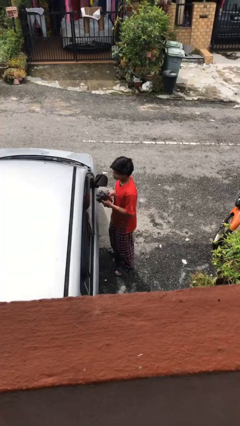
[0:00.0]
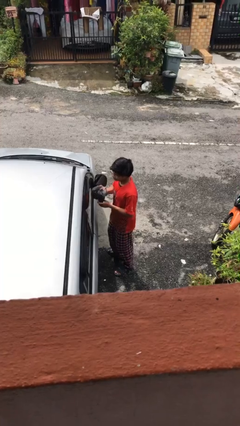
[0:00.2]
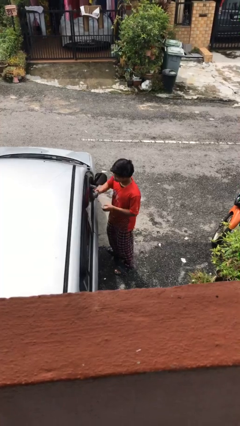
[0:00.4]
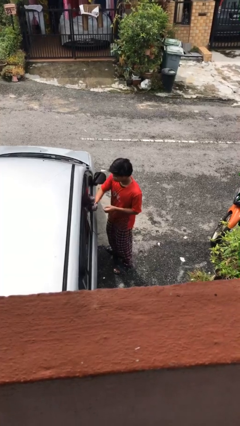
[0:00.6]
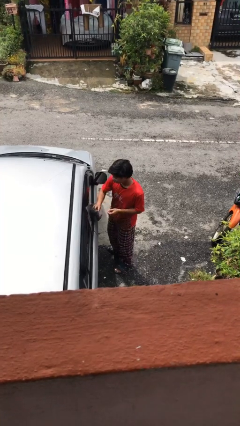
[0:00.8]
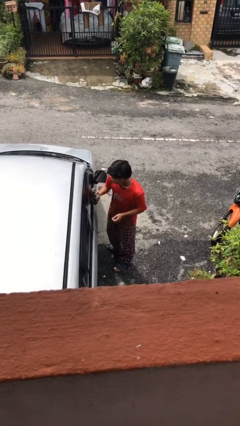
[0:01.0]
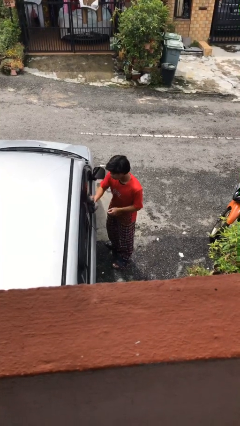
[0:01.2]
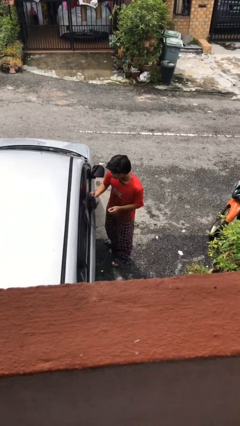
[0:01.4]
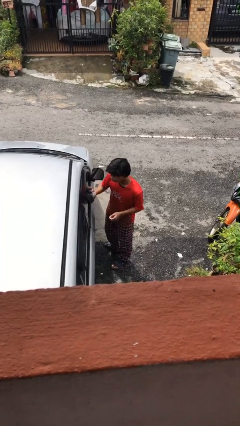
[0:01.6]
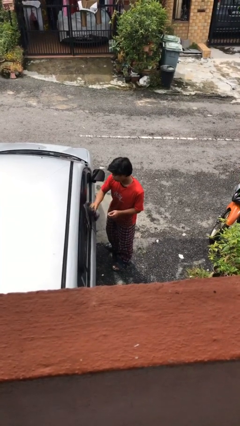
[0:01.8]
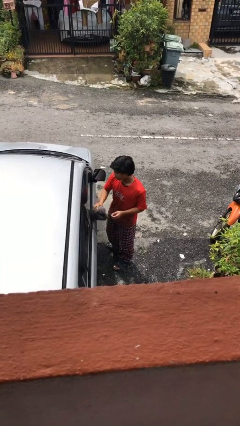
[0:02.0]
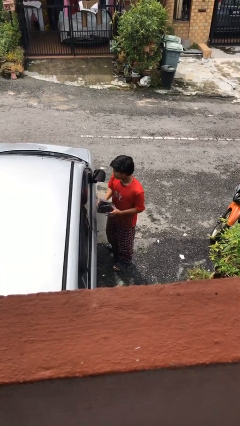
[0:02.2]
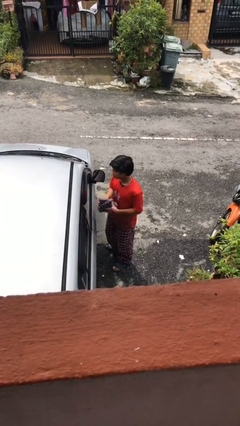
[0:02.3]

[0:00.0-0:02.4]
person polishes car with rag

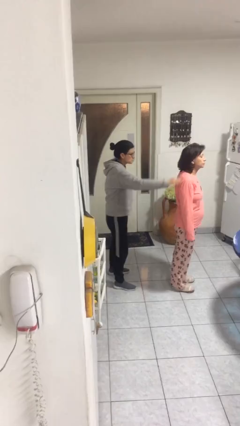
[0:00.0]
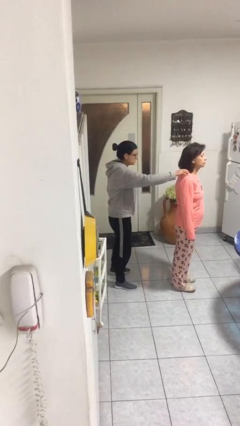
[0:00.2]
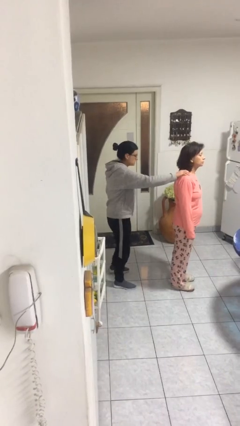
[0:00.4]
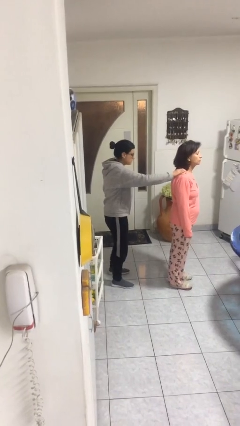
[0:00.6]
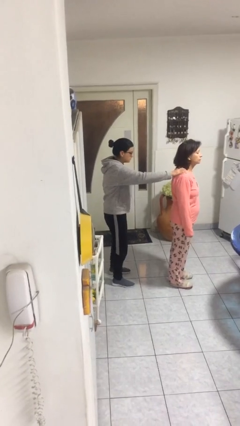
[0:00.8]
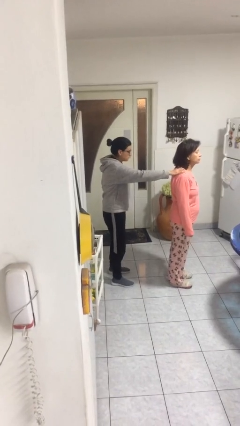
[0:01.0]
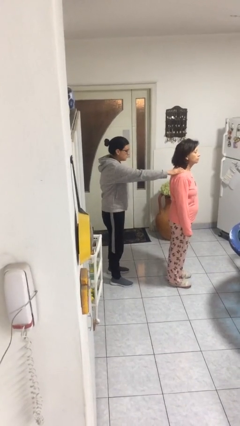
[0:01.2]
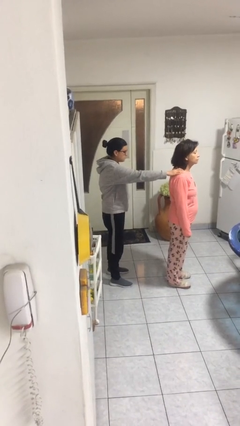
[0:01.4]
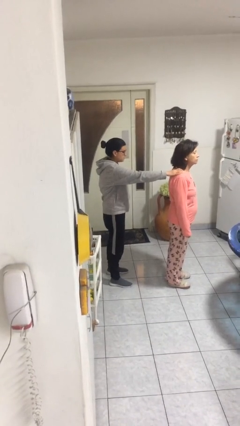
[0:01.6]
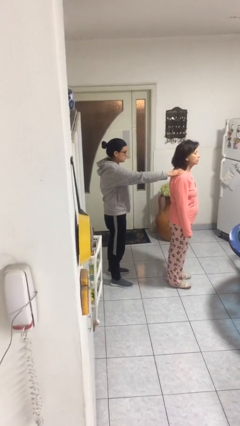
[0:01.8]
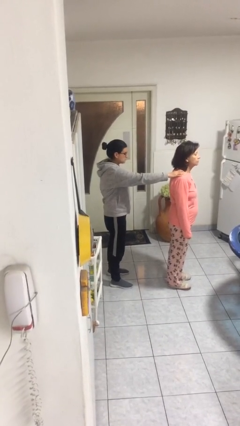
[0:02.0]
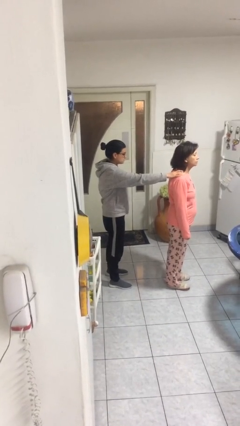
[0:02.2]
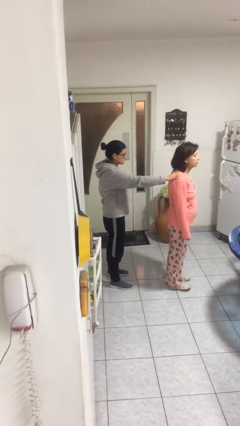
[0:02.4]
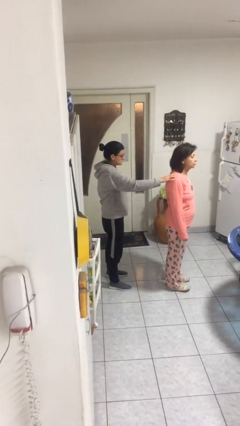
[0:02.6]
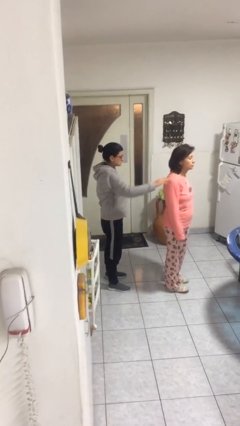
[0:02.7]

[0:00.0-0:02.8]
person grabs person by shoulder

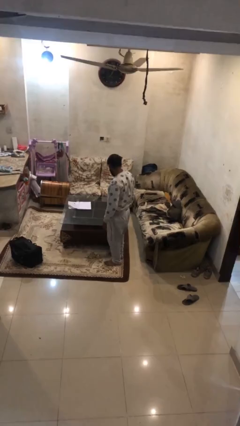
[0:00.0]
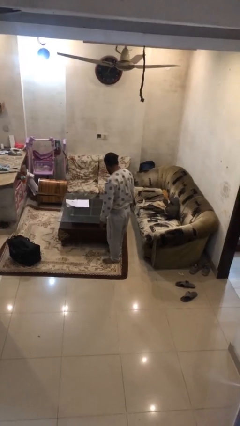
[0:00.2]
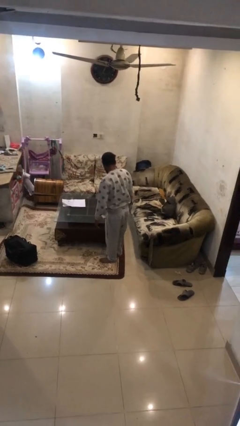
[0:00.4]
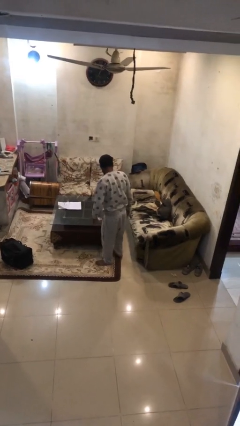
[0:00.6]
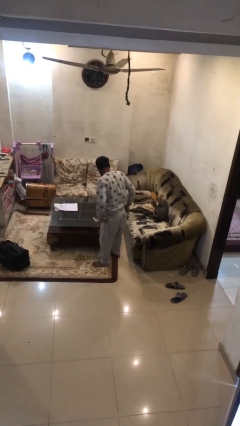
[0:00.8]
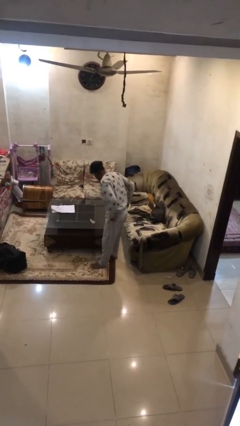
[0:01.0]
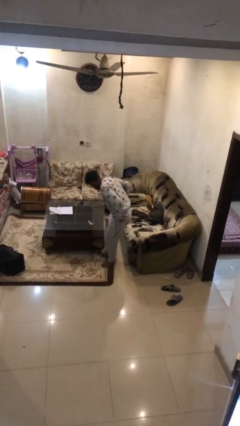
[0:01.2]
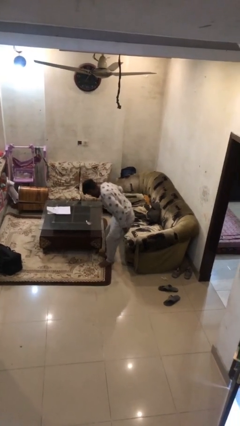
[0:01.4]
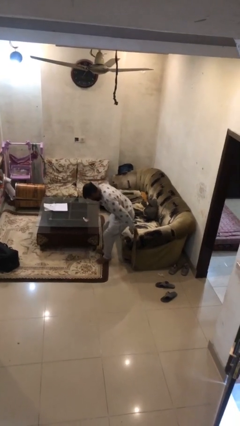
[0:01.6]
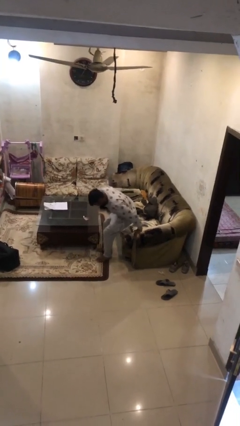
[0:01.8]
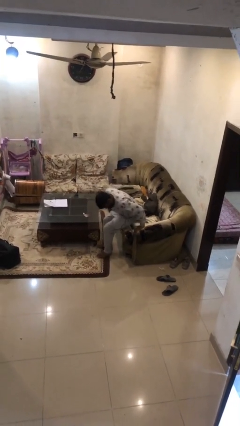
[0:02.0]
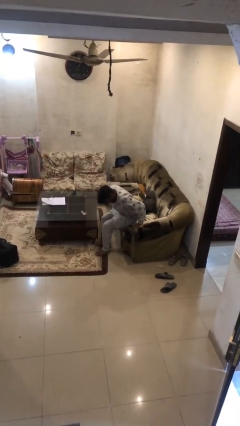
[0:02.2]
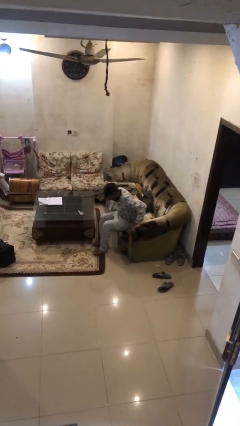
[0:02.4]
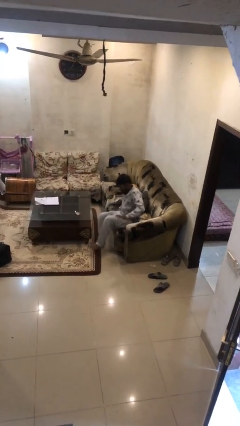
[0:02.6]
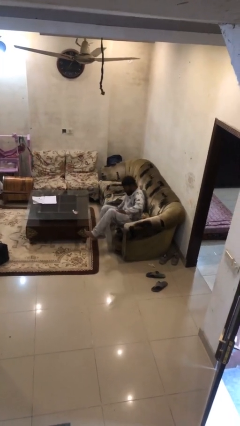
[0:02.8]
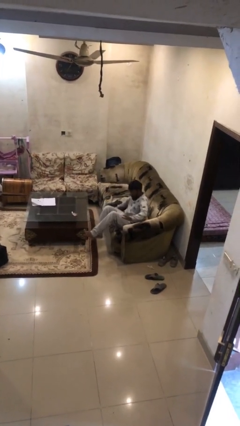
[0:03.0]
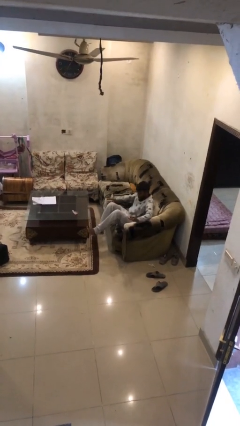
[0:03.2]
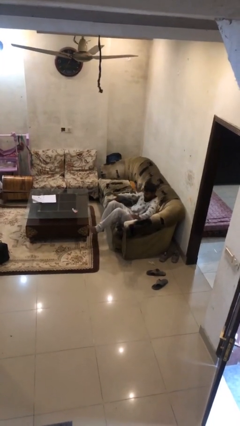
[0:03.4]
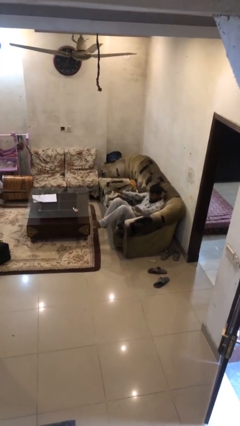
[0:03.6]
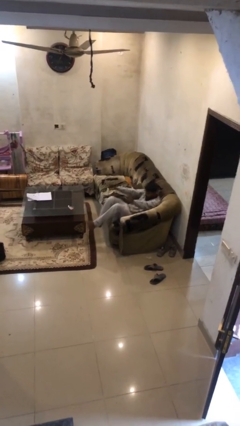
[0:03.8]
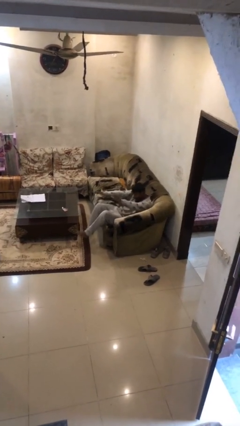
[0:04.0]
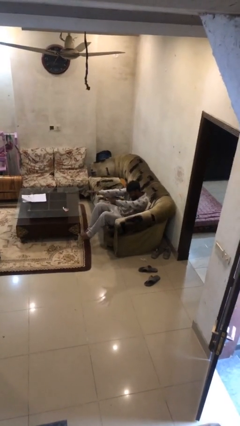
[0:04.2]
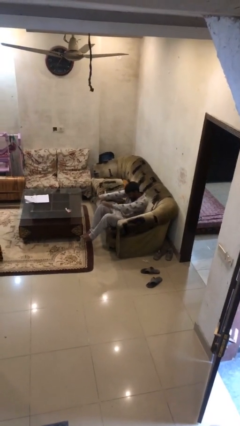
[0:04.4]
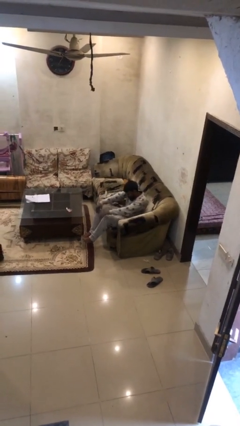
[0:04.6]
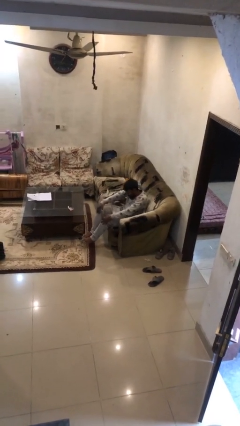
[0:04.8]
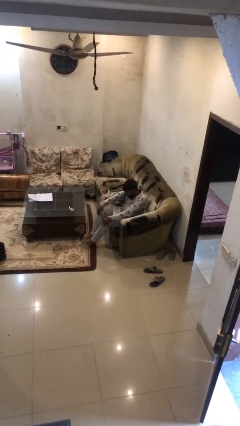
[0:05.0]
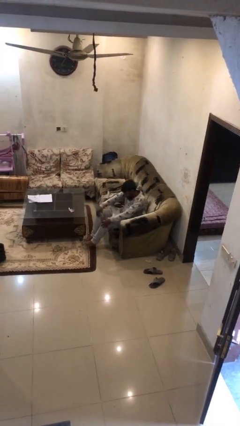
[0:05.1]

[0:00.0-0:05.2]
person sits down

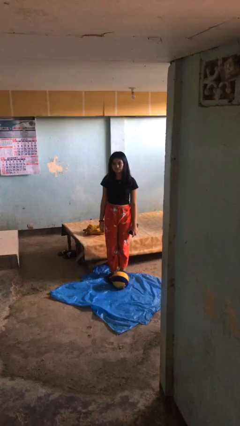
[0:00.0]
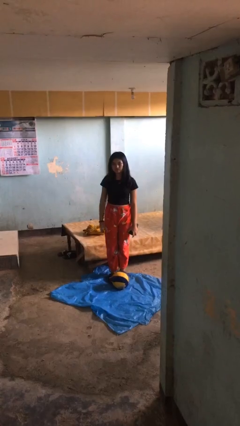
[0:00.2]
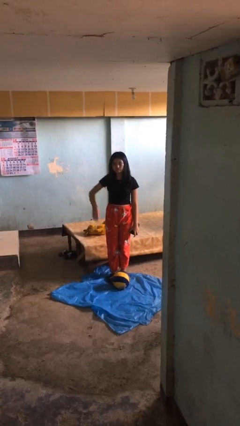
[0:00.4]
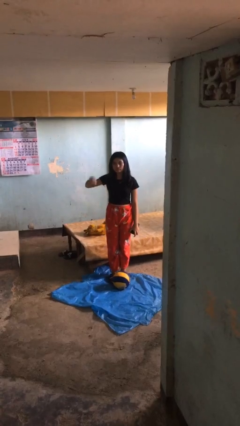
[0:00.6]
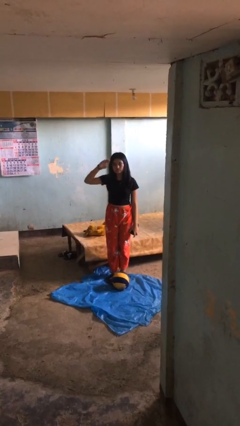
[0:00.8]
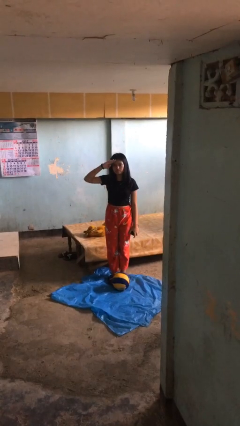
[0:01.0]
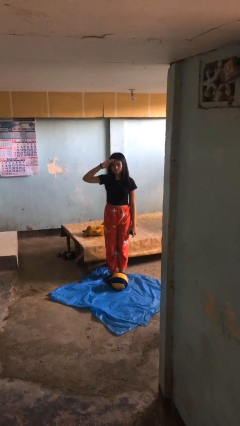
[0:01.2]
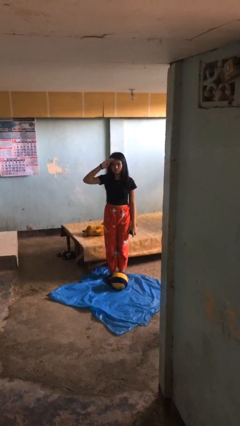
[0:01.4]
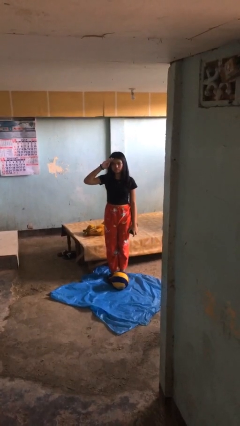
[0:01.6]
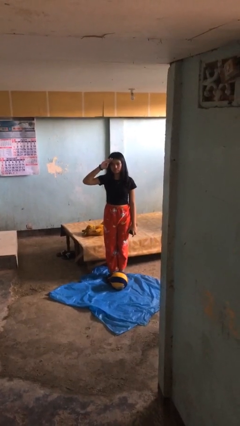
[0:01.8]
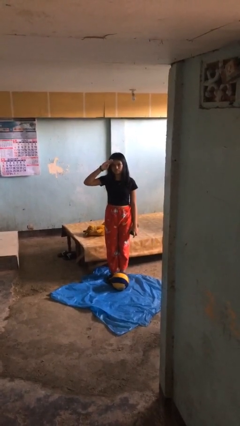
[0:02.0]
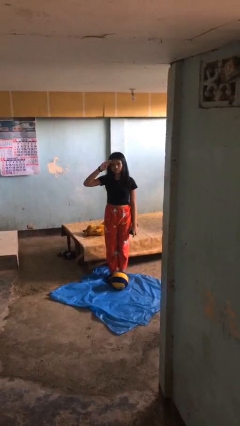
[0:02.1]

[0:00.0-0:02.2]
person salutes

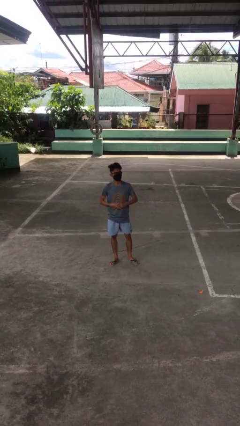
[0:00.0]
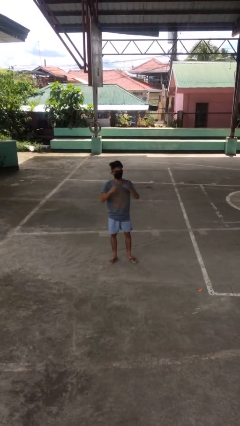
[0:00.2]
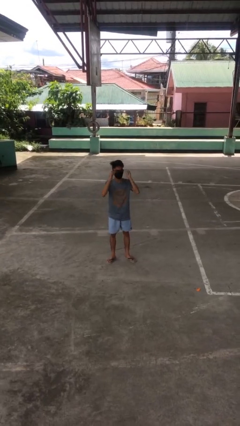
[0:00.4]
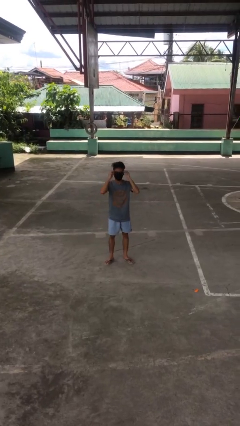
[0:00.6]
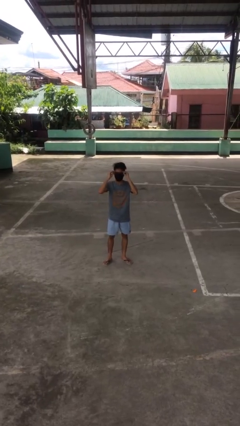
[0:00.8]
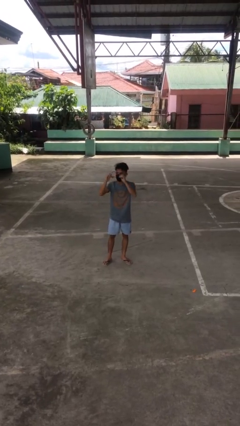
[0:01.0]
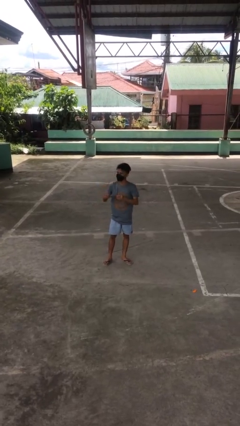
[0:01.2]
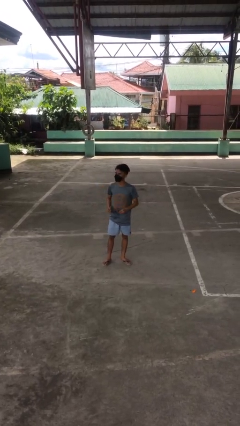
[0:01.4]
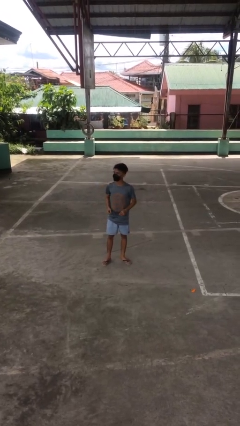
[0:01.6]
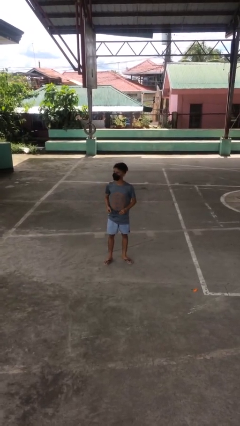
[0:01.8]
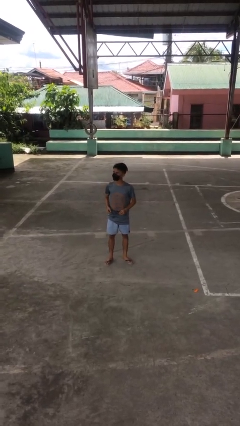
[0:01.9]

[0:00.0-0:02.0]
person takes off glasses

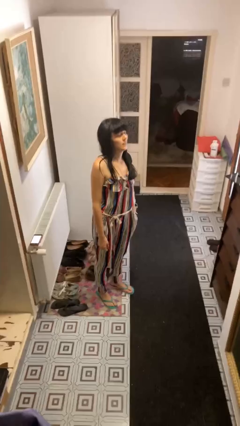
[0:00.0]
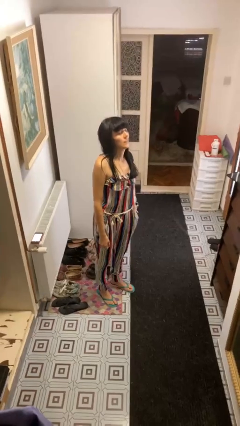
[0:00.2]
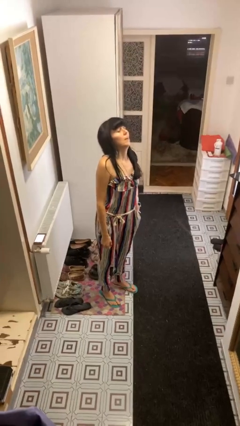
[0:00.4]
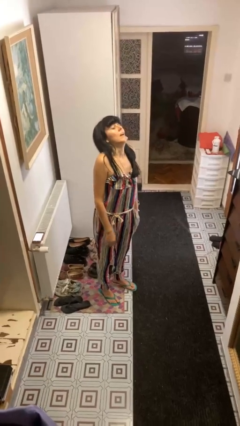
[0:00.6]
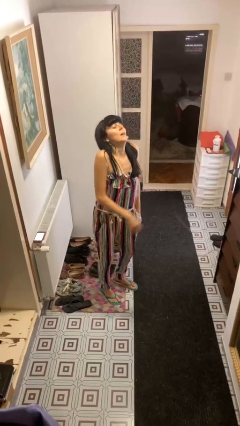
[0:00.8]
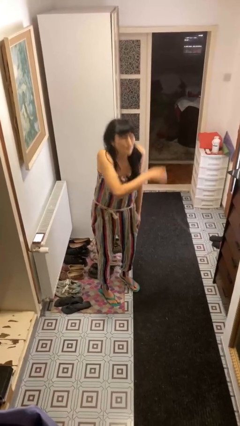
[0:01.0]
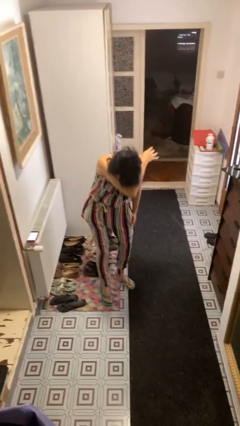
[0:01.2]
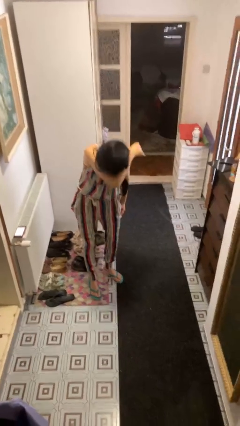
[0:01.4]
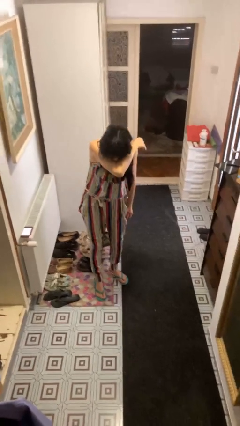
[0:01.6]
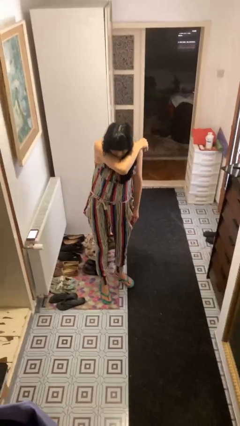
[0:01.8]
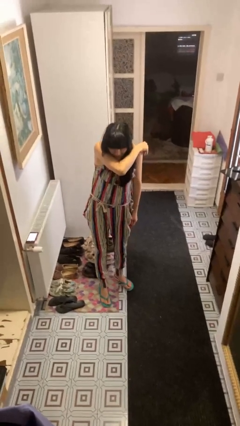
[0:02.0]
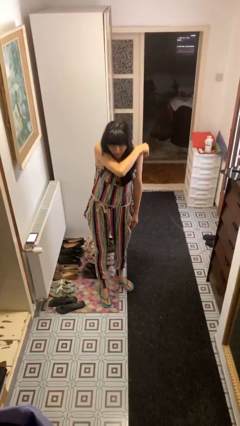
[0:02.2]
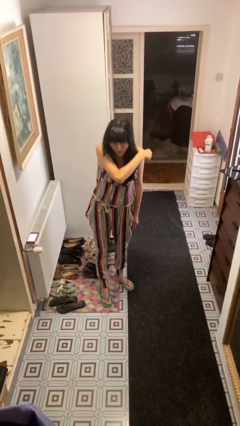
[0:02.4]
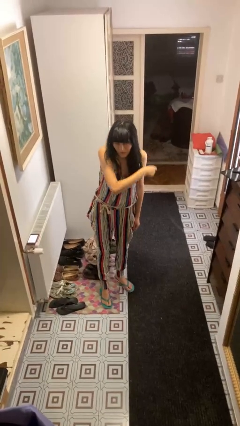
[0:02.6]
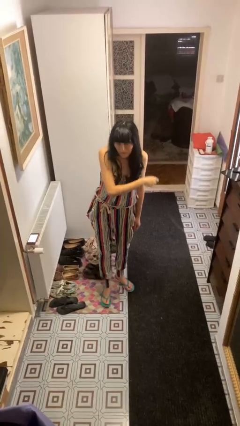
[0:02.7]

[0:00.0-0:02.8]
person sneezes into arm

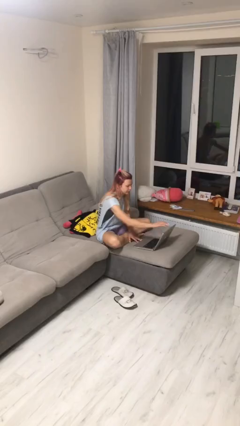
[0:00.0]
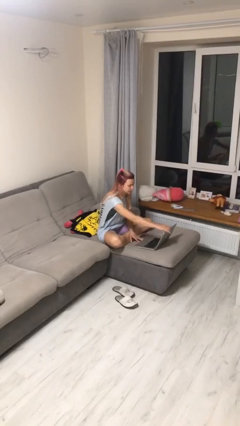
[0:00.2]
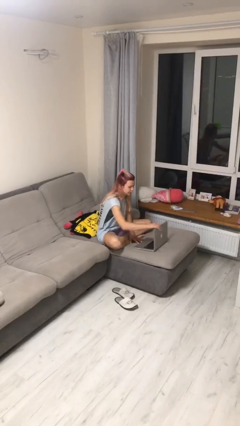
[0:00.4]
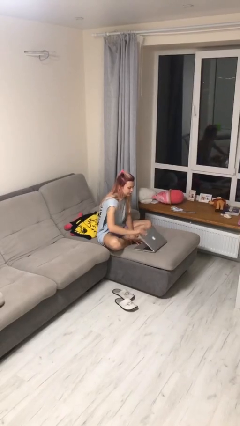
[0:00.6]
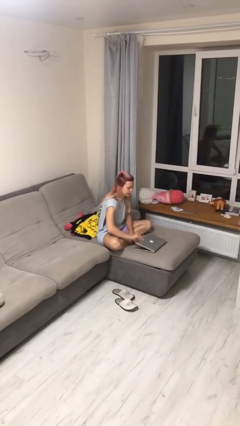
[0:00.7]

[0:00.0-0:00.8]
person closes laptop
